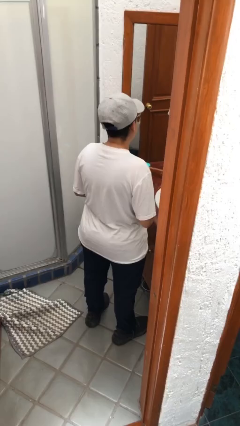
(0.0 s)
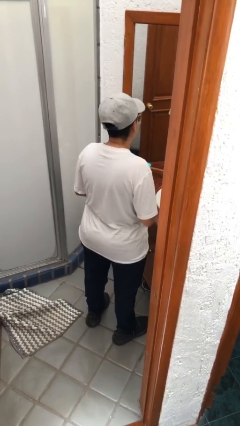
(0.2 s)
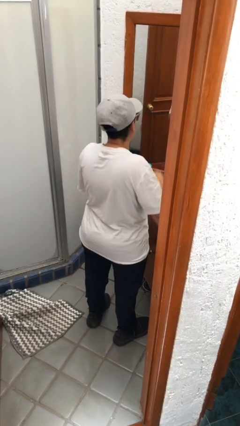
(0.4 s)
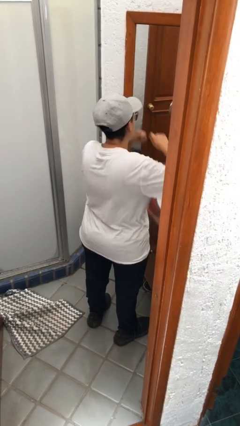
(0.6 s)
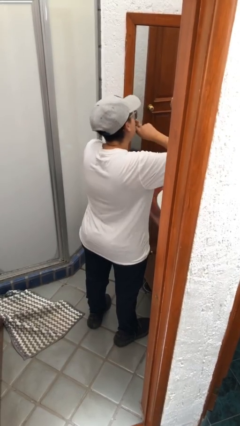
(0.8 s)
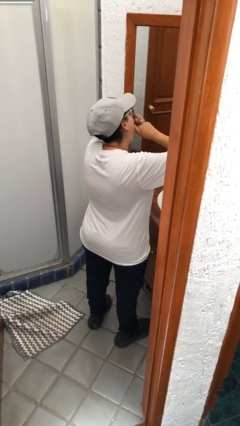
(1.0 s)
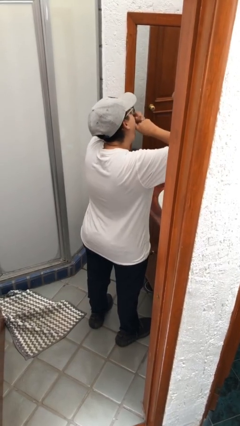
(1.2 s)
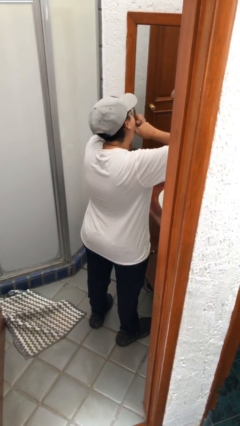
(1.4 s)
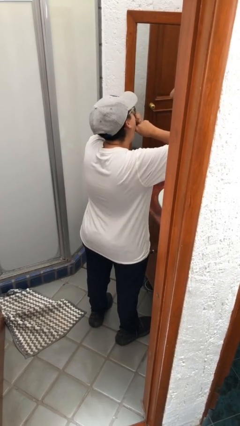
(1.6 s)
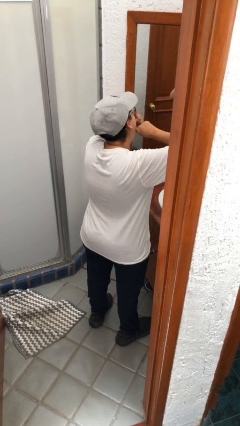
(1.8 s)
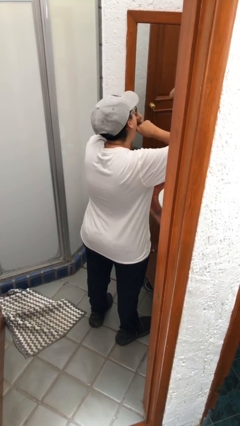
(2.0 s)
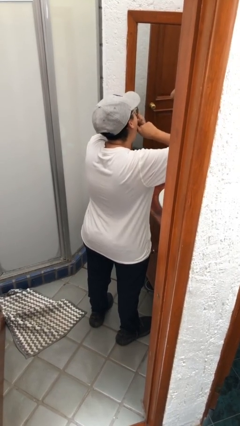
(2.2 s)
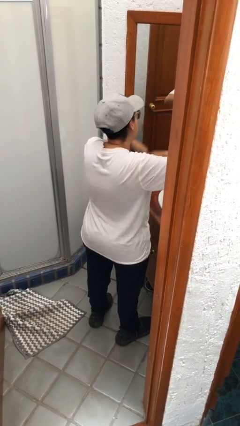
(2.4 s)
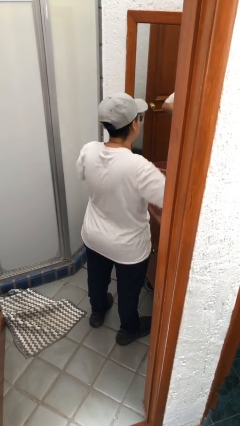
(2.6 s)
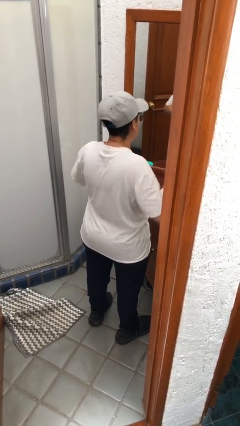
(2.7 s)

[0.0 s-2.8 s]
person flosses

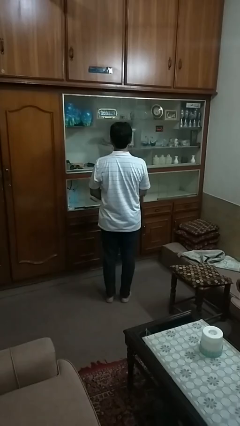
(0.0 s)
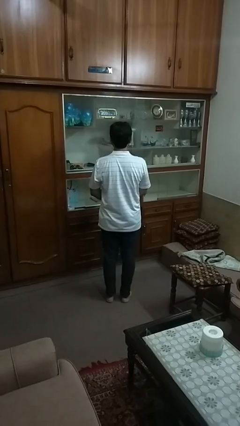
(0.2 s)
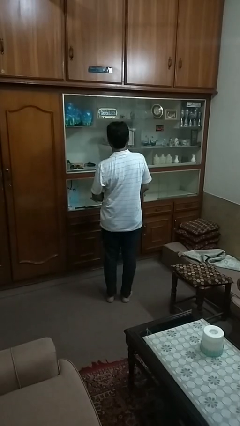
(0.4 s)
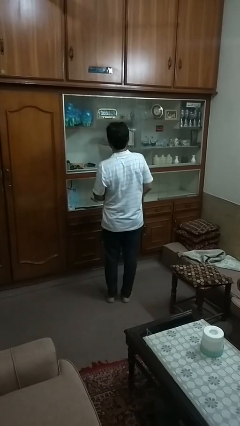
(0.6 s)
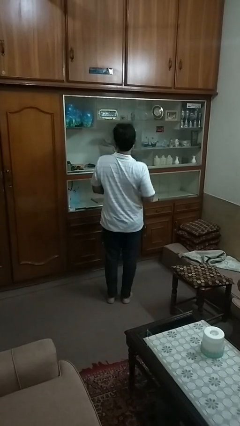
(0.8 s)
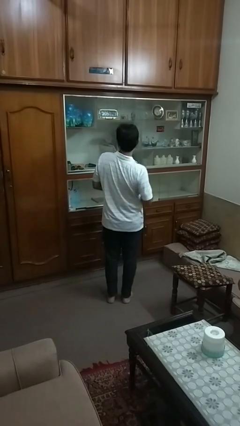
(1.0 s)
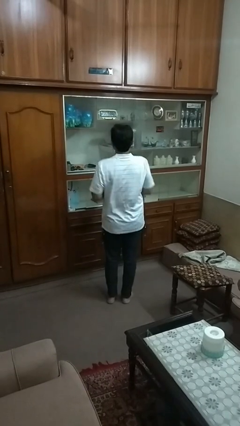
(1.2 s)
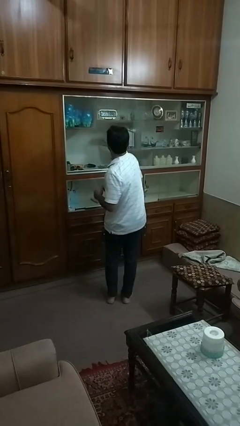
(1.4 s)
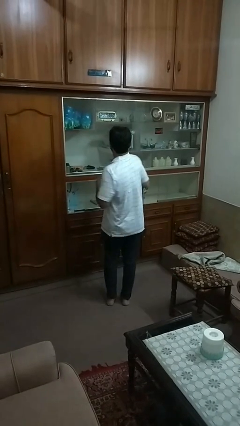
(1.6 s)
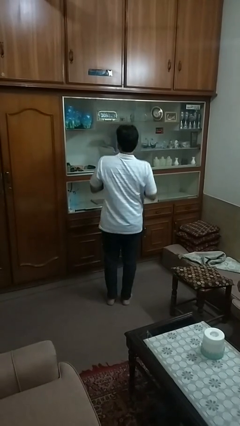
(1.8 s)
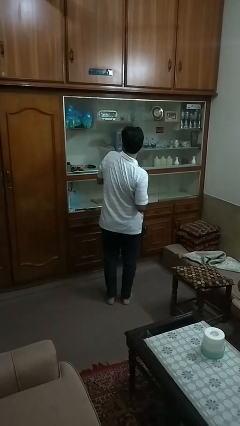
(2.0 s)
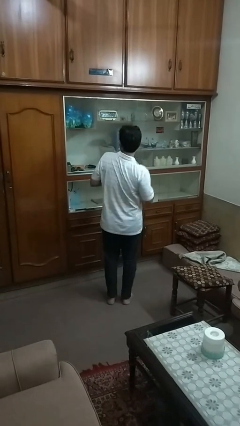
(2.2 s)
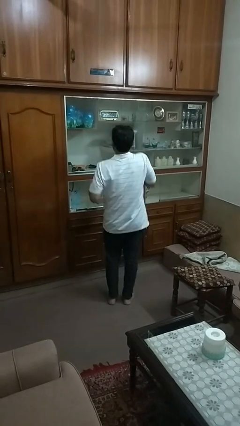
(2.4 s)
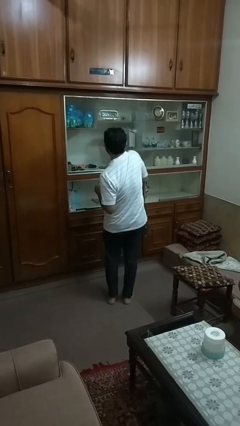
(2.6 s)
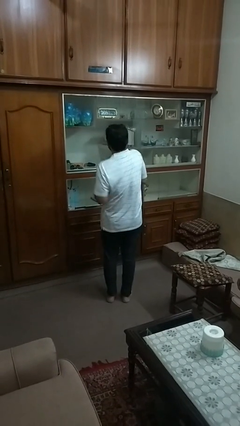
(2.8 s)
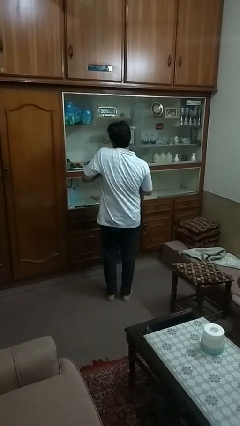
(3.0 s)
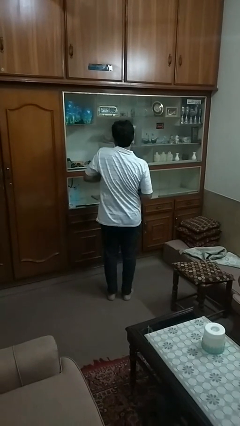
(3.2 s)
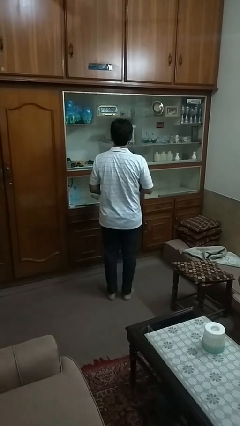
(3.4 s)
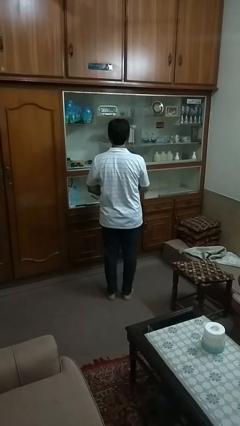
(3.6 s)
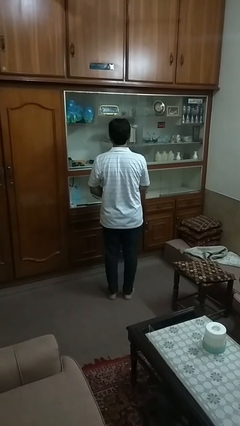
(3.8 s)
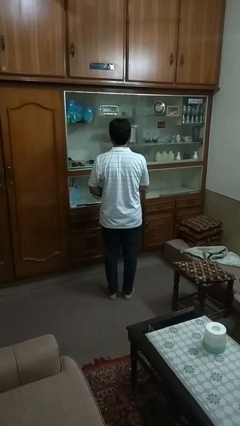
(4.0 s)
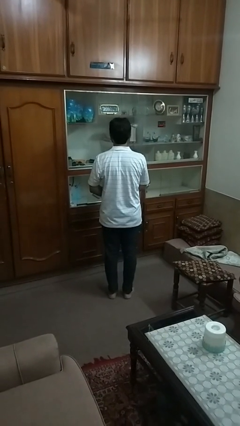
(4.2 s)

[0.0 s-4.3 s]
person dances in place

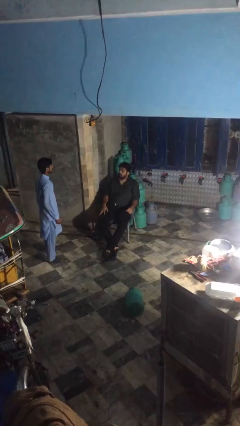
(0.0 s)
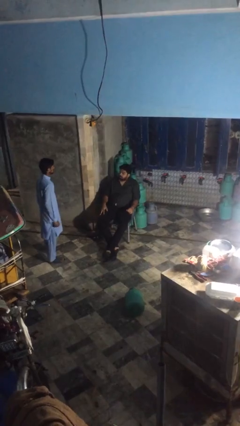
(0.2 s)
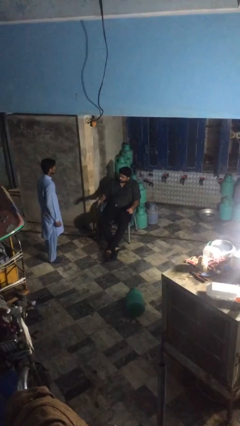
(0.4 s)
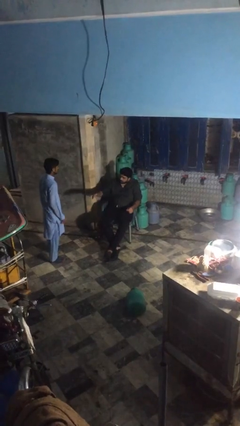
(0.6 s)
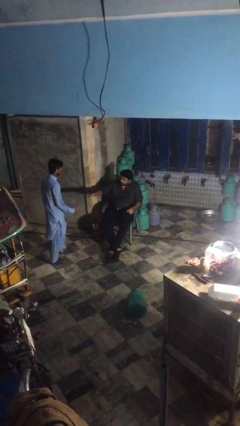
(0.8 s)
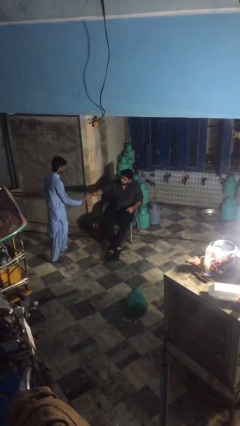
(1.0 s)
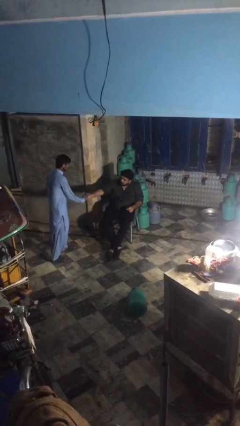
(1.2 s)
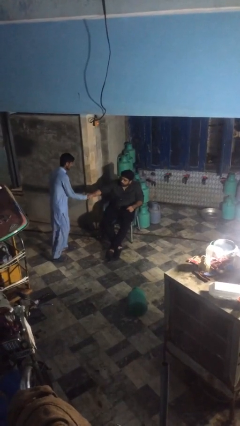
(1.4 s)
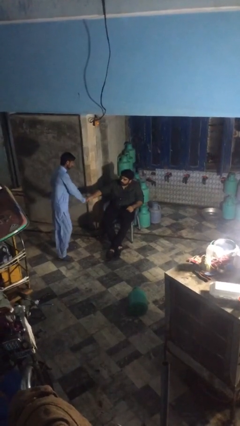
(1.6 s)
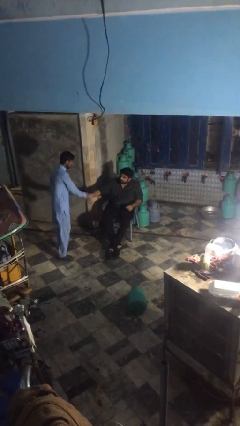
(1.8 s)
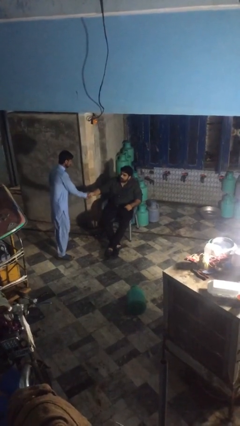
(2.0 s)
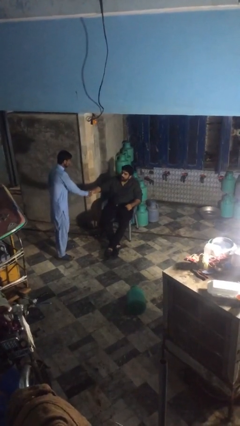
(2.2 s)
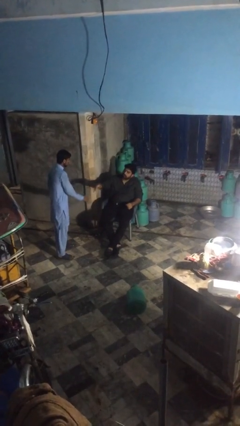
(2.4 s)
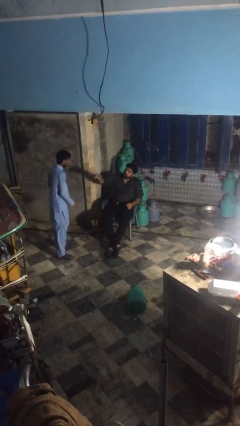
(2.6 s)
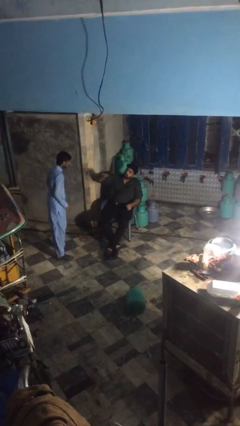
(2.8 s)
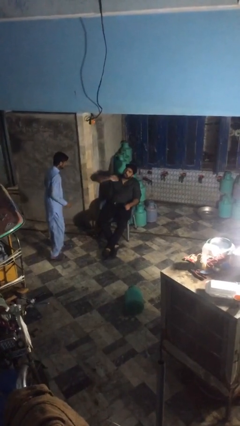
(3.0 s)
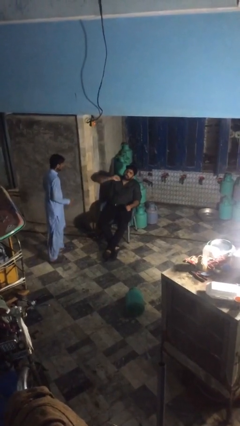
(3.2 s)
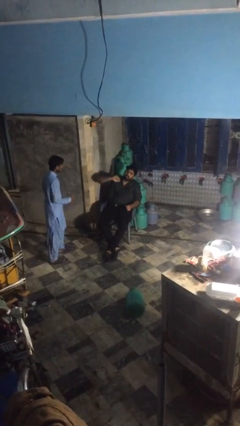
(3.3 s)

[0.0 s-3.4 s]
person shakes hand

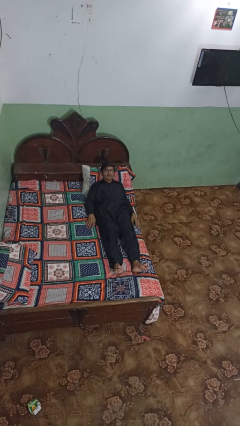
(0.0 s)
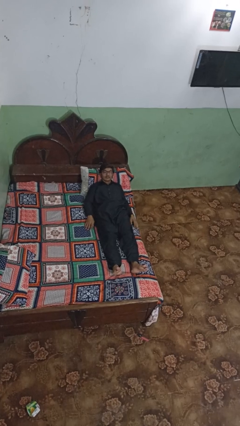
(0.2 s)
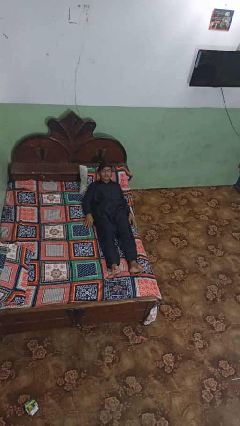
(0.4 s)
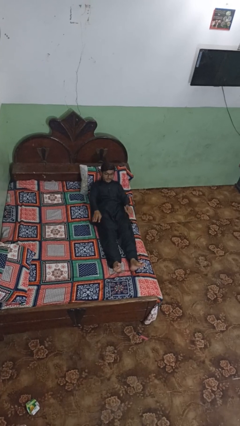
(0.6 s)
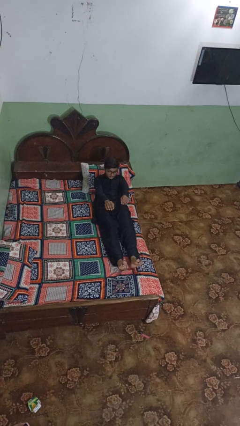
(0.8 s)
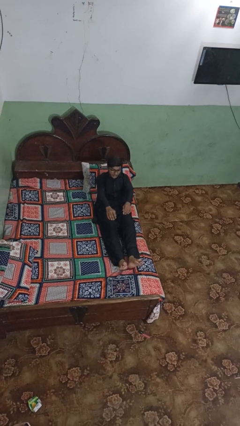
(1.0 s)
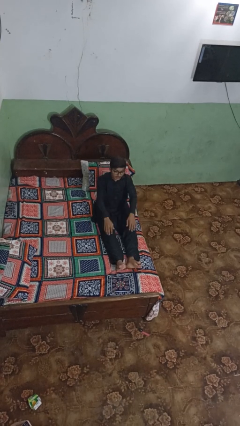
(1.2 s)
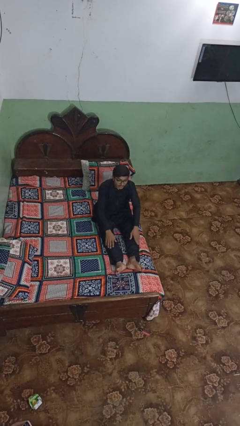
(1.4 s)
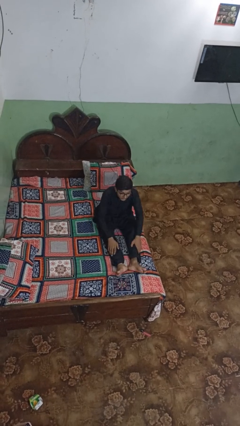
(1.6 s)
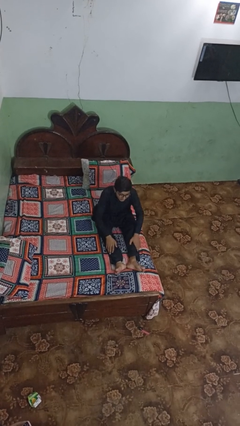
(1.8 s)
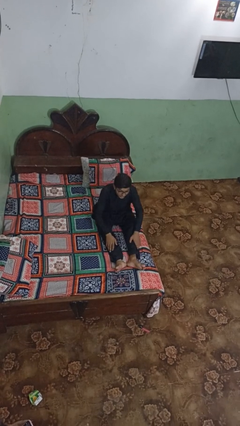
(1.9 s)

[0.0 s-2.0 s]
person stands up

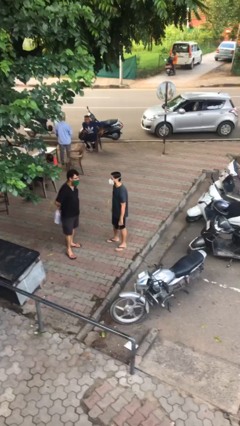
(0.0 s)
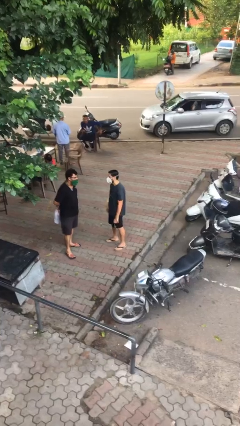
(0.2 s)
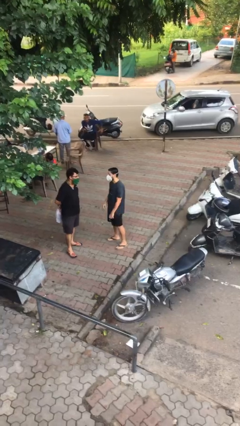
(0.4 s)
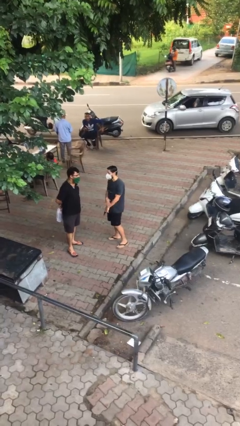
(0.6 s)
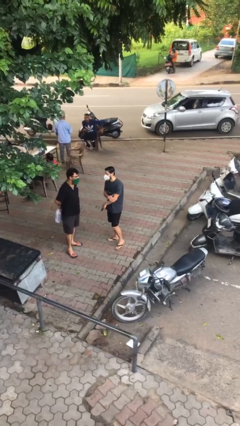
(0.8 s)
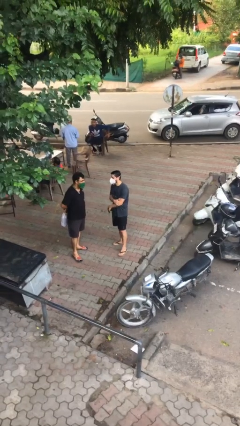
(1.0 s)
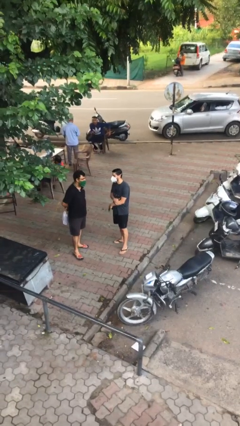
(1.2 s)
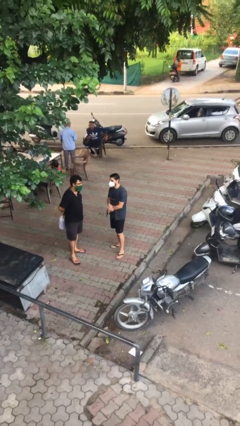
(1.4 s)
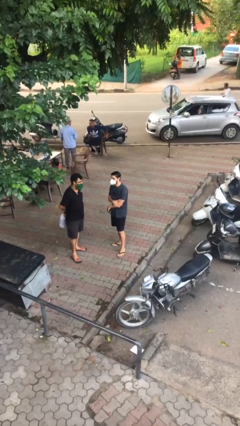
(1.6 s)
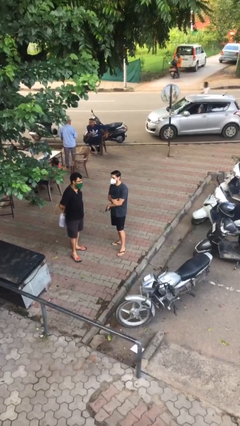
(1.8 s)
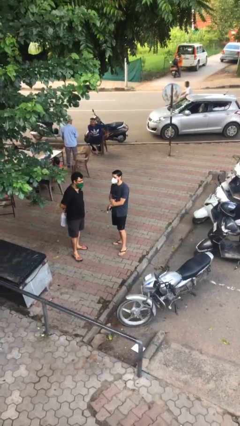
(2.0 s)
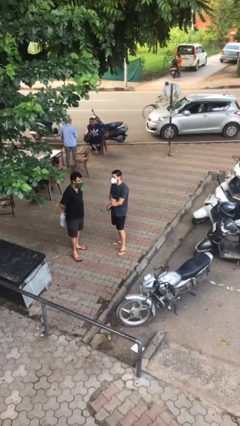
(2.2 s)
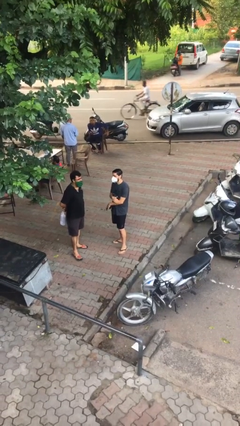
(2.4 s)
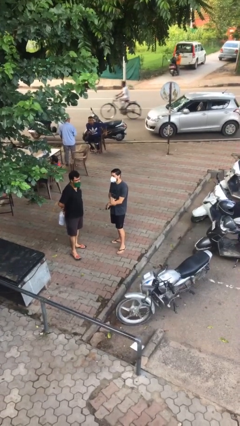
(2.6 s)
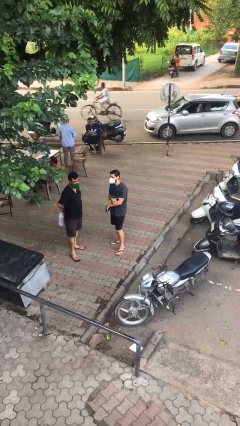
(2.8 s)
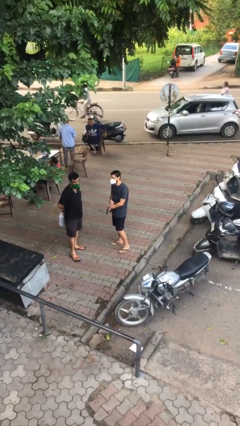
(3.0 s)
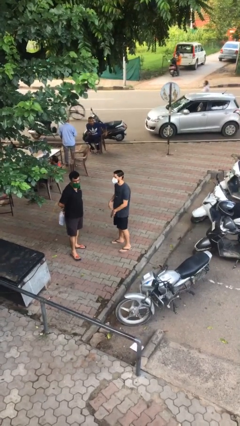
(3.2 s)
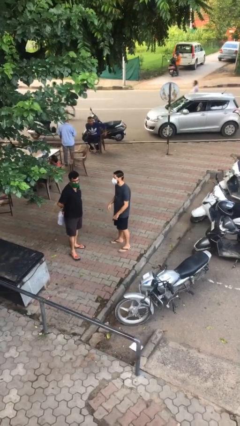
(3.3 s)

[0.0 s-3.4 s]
person talks to person

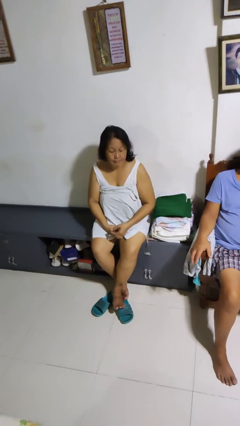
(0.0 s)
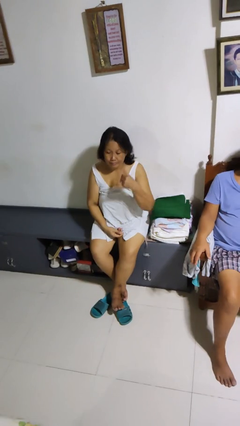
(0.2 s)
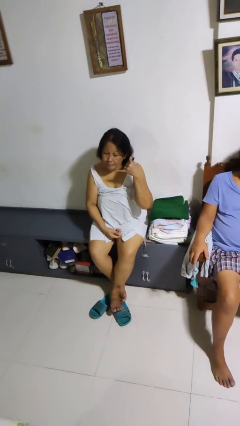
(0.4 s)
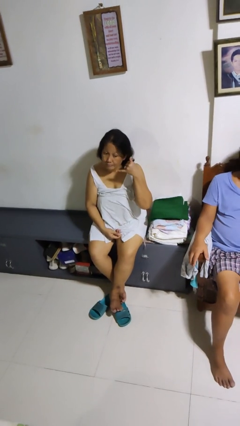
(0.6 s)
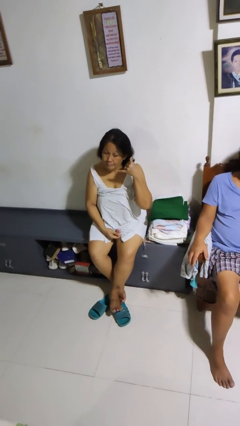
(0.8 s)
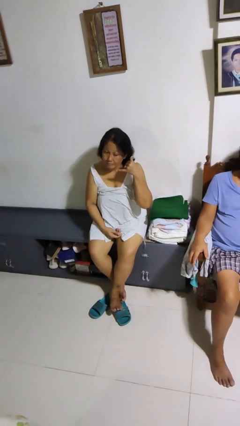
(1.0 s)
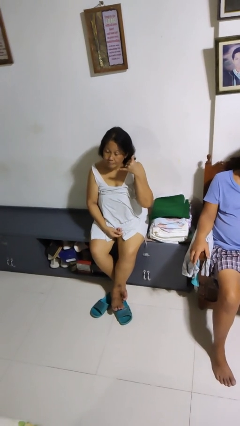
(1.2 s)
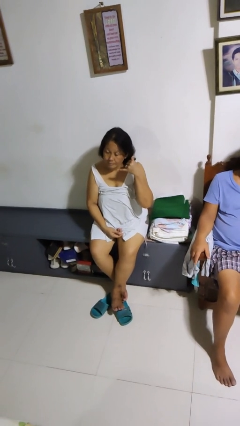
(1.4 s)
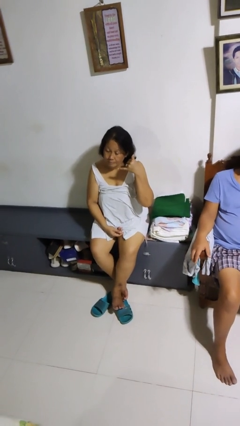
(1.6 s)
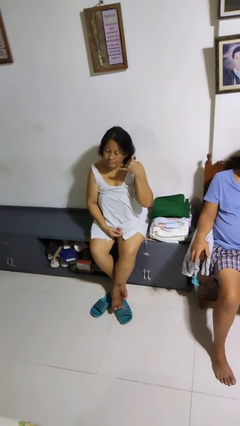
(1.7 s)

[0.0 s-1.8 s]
person gestures call me
